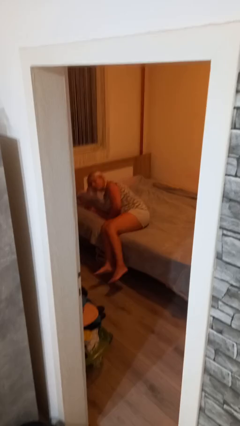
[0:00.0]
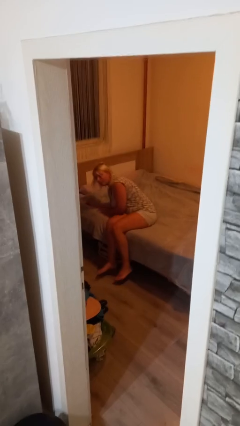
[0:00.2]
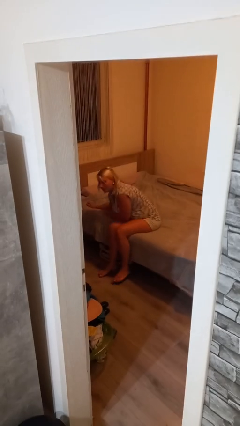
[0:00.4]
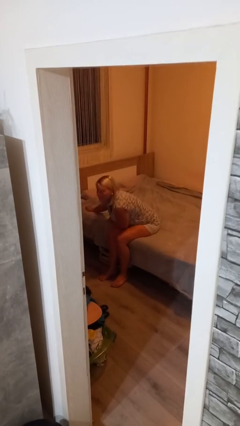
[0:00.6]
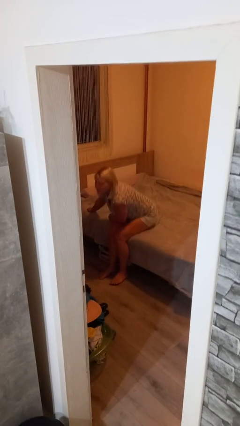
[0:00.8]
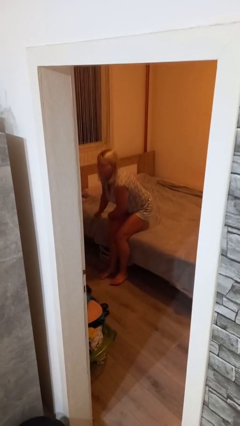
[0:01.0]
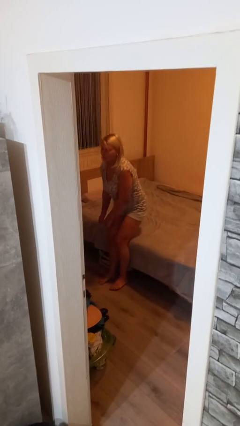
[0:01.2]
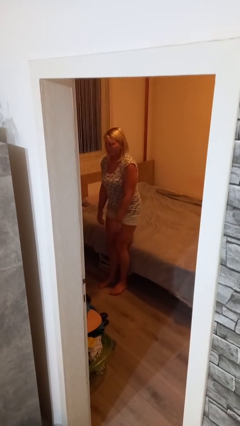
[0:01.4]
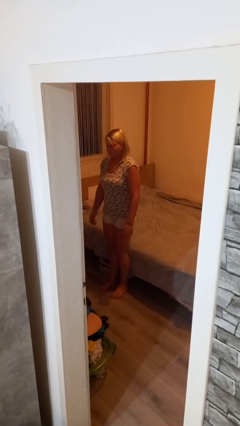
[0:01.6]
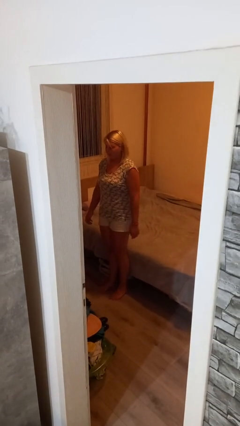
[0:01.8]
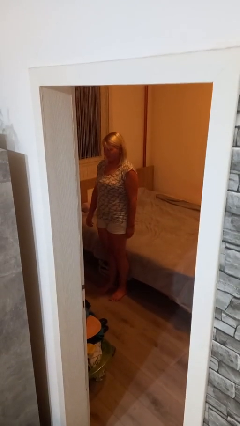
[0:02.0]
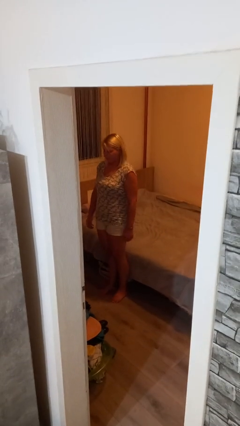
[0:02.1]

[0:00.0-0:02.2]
person stands up

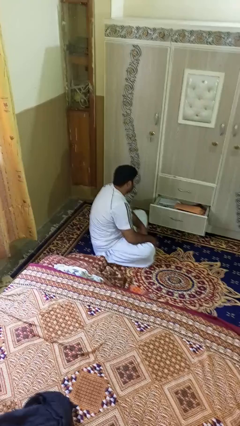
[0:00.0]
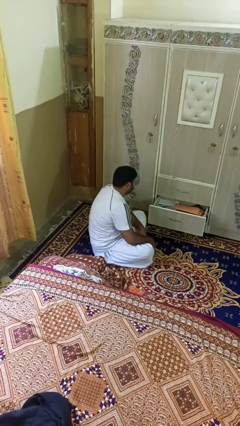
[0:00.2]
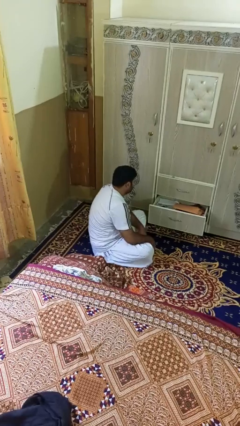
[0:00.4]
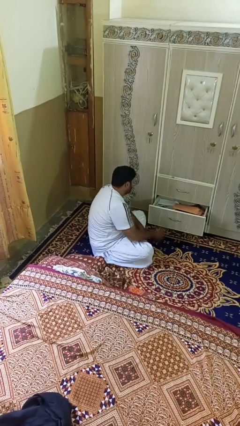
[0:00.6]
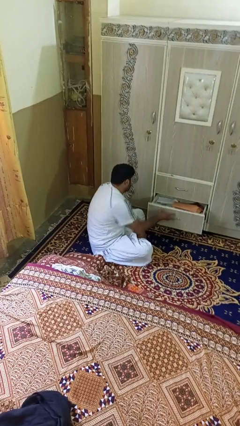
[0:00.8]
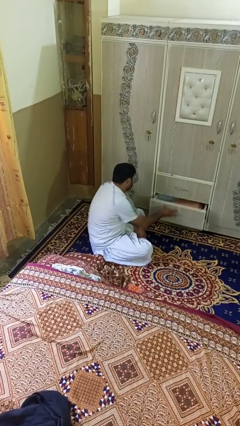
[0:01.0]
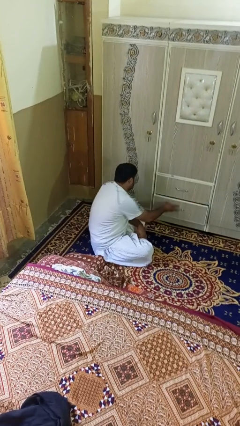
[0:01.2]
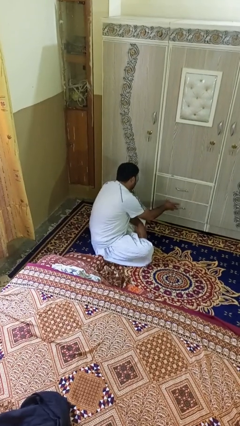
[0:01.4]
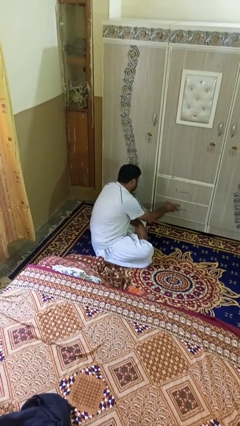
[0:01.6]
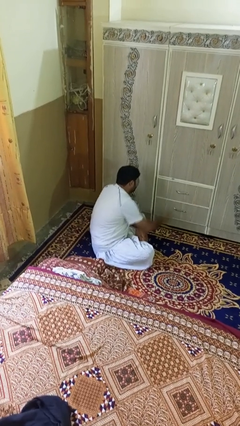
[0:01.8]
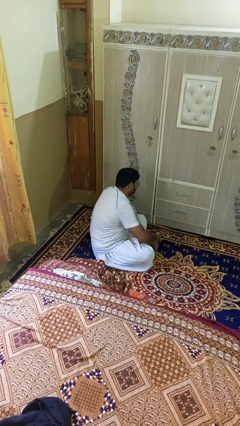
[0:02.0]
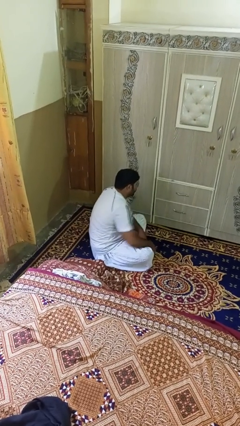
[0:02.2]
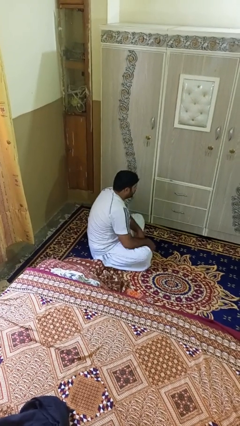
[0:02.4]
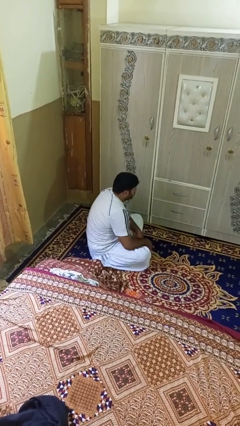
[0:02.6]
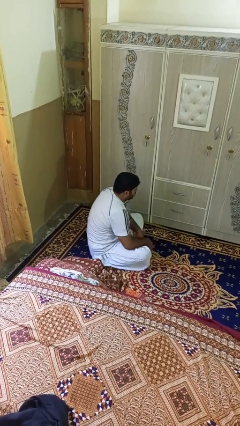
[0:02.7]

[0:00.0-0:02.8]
person closes dresser drawer

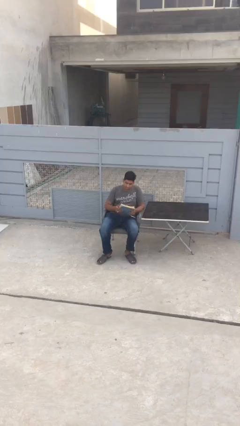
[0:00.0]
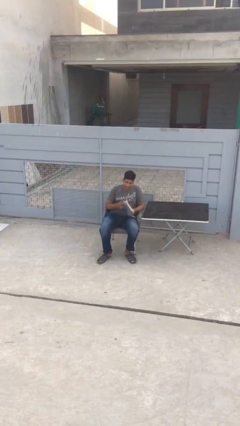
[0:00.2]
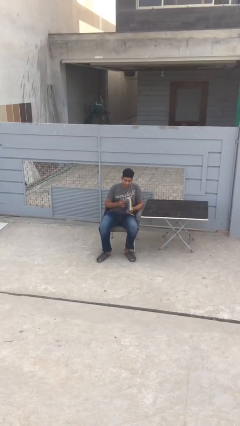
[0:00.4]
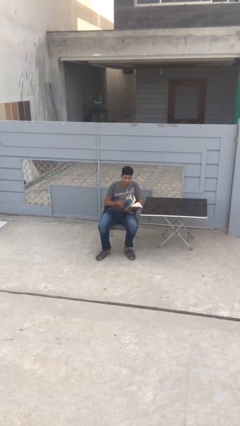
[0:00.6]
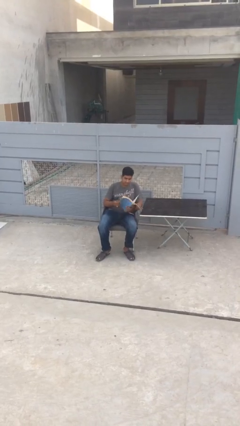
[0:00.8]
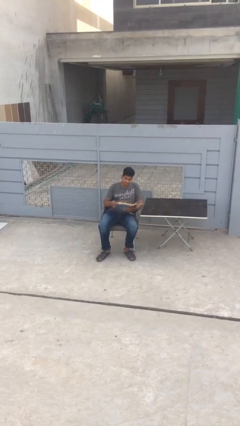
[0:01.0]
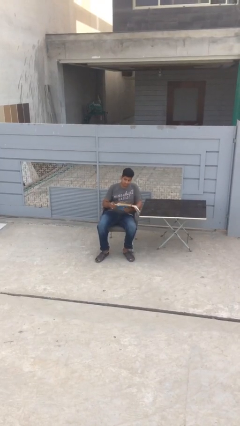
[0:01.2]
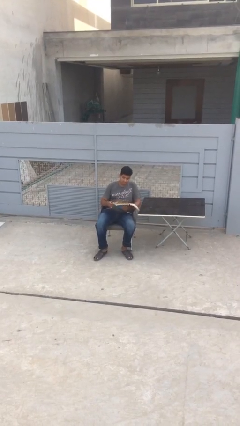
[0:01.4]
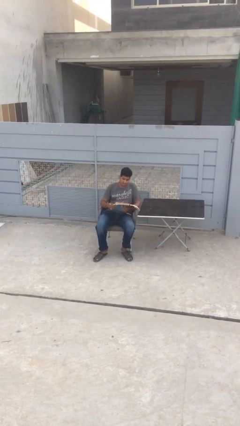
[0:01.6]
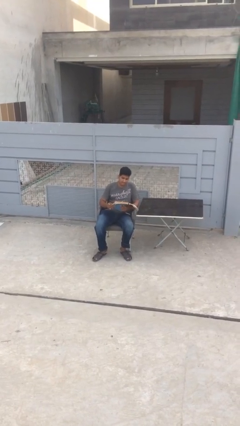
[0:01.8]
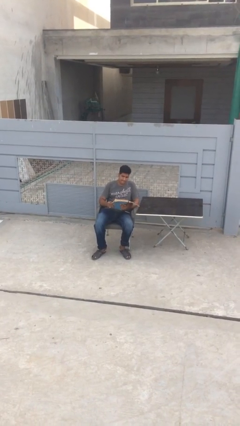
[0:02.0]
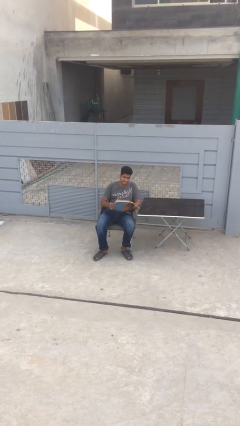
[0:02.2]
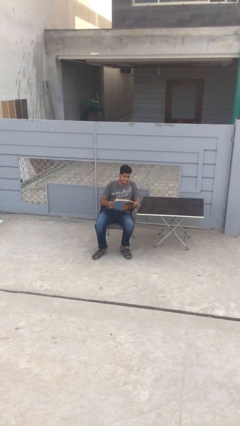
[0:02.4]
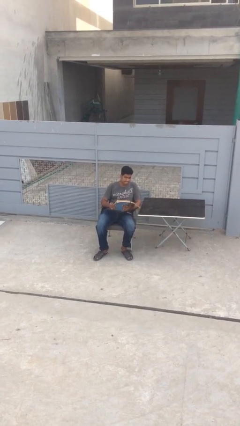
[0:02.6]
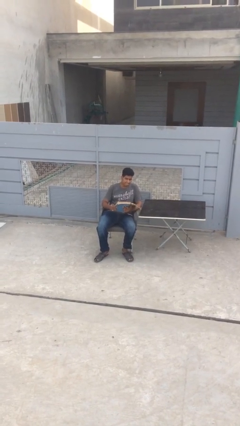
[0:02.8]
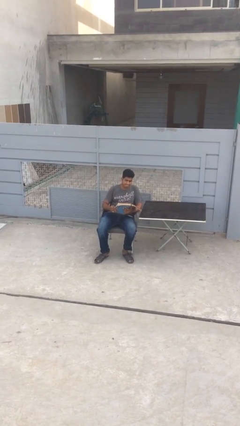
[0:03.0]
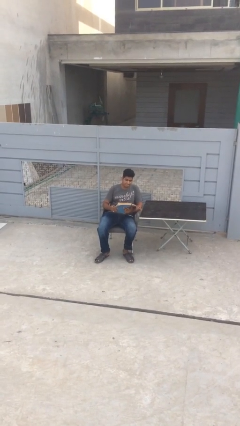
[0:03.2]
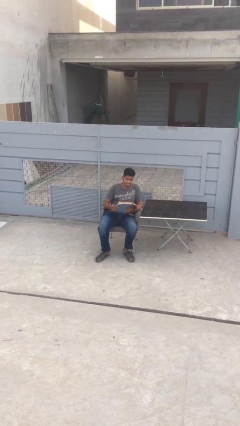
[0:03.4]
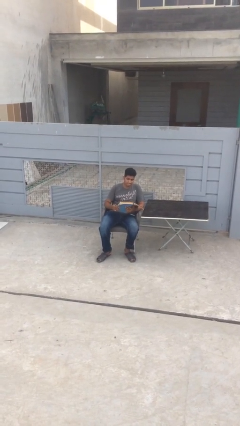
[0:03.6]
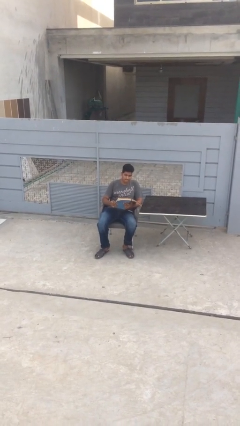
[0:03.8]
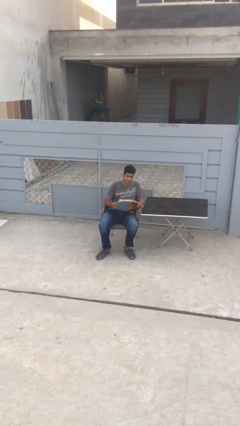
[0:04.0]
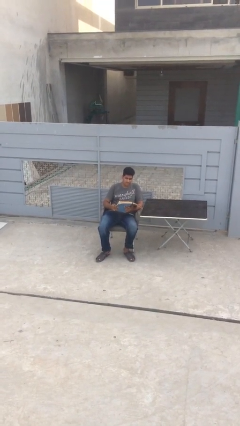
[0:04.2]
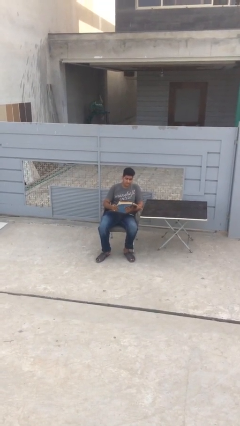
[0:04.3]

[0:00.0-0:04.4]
person reads document

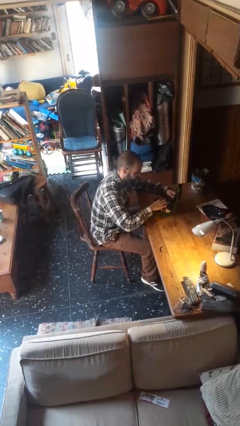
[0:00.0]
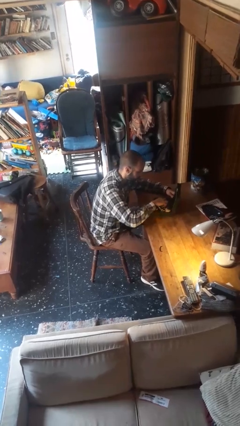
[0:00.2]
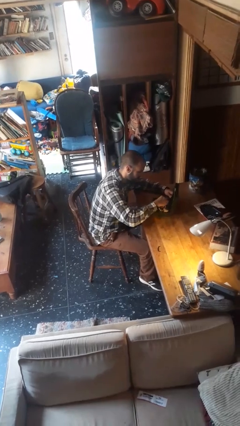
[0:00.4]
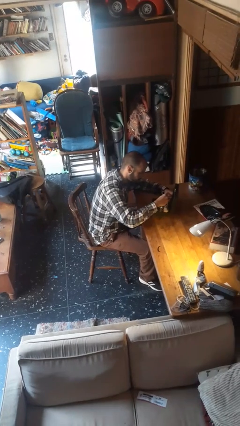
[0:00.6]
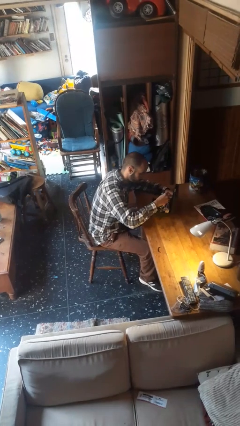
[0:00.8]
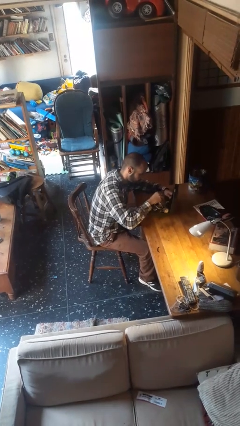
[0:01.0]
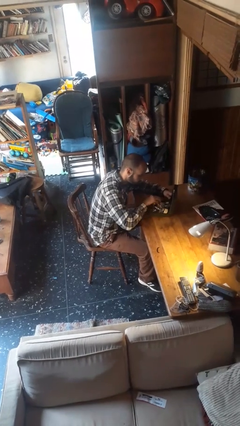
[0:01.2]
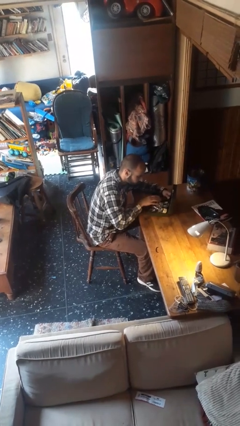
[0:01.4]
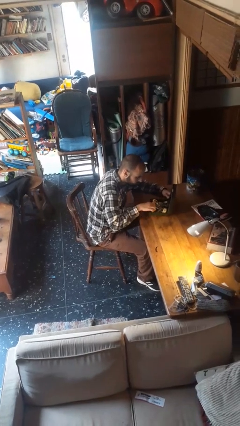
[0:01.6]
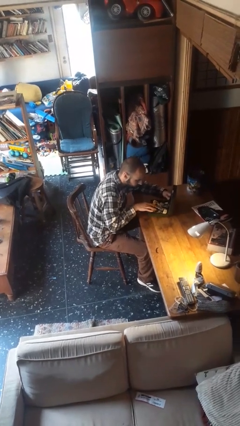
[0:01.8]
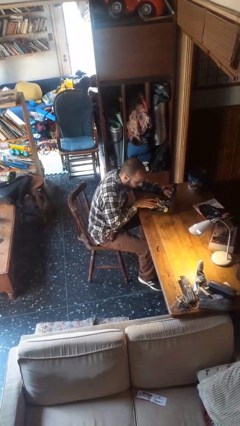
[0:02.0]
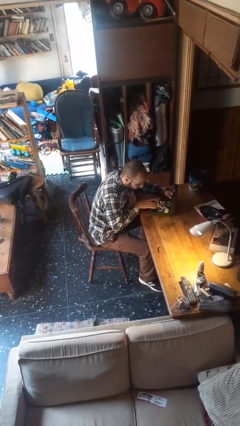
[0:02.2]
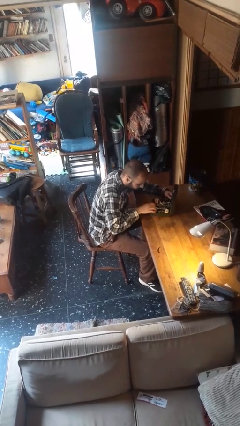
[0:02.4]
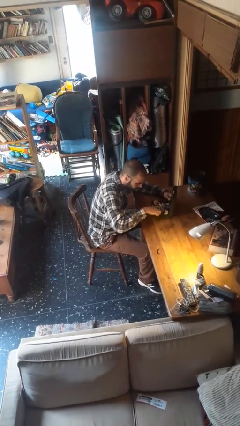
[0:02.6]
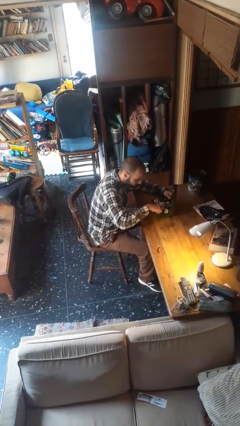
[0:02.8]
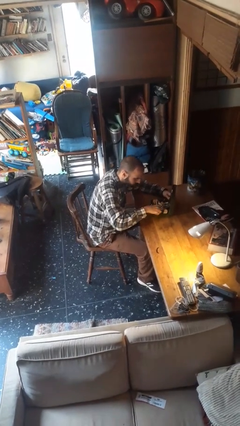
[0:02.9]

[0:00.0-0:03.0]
person searches jewelry box

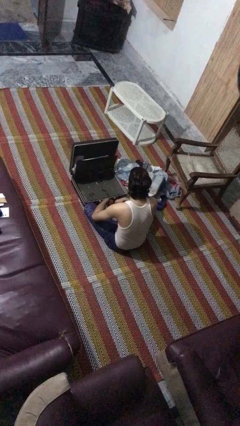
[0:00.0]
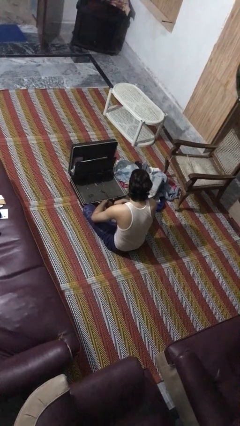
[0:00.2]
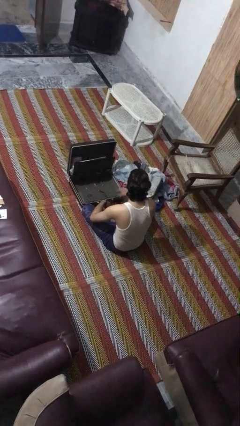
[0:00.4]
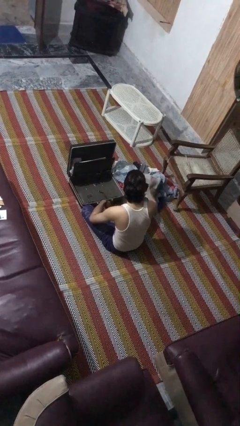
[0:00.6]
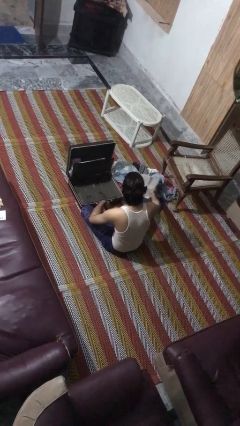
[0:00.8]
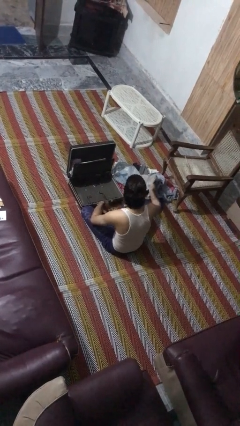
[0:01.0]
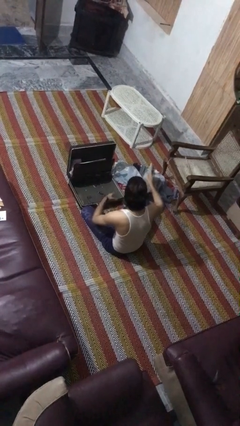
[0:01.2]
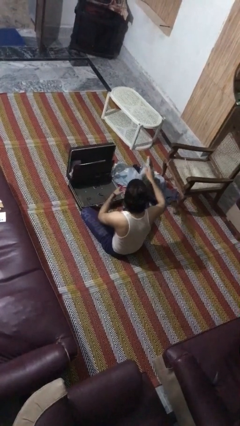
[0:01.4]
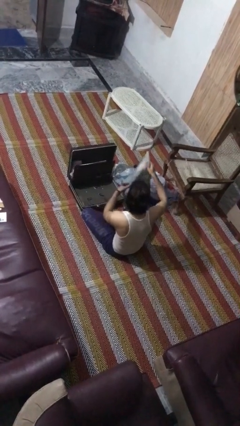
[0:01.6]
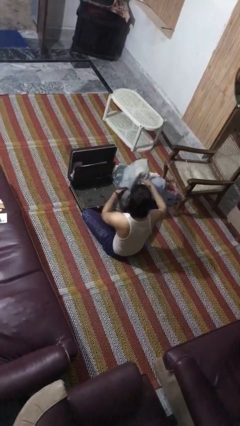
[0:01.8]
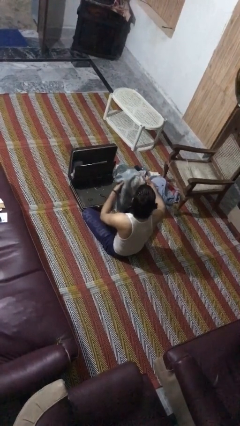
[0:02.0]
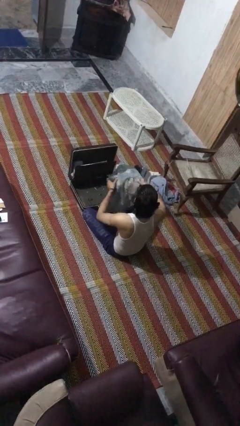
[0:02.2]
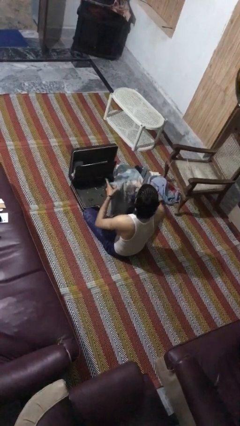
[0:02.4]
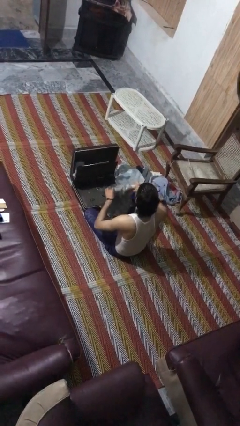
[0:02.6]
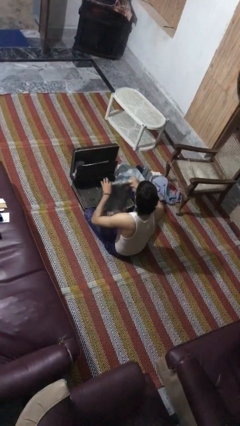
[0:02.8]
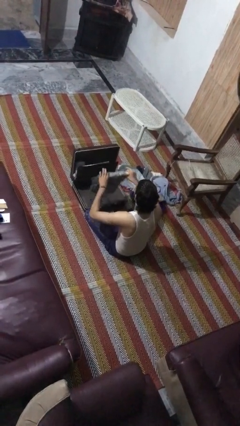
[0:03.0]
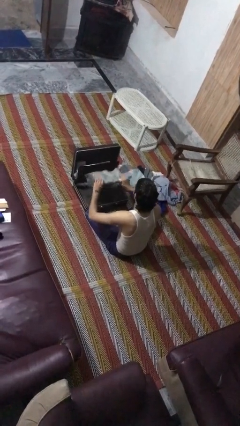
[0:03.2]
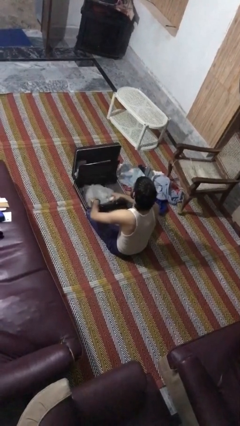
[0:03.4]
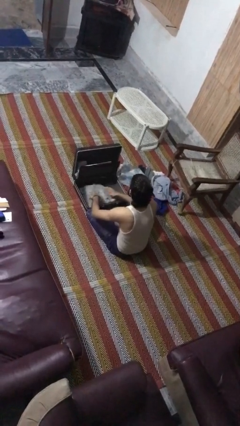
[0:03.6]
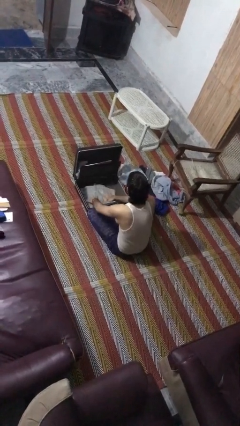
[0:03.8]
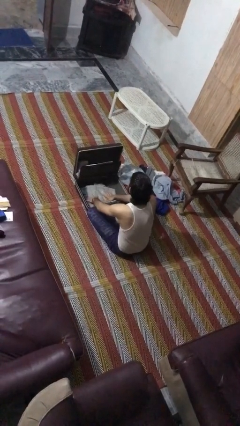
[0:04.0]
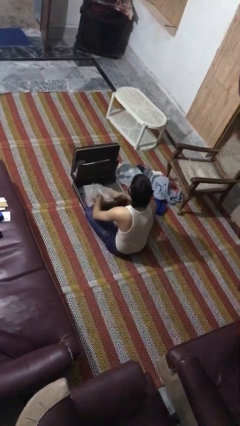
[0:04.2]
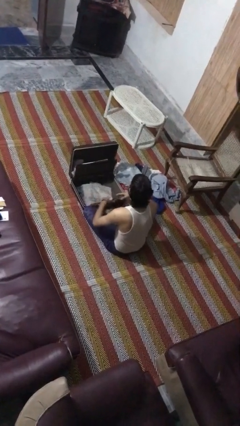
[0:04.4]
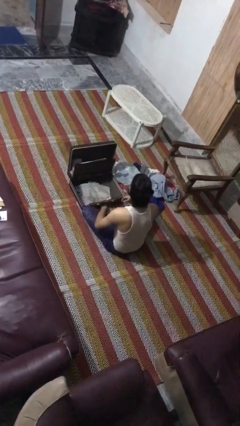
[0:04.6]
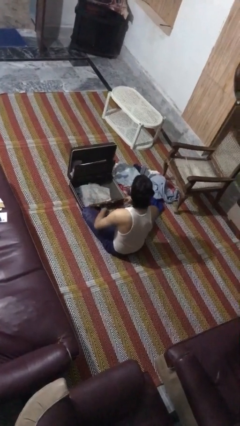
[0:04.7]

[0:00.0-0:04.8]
person loads clothes into suitcase
